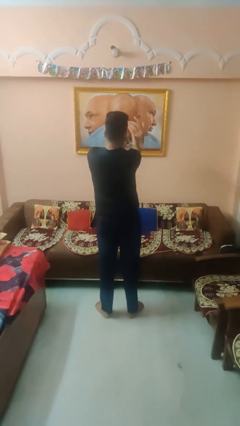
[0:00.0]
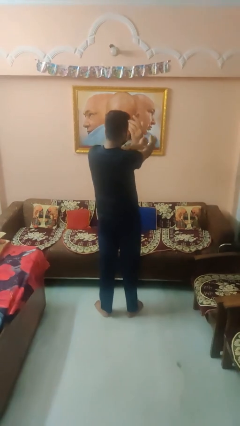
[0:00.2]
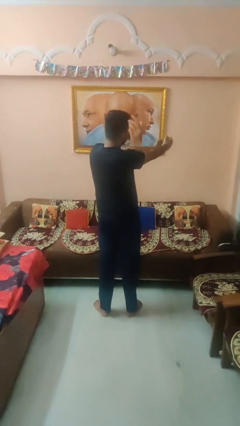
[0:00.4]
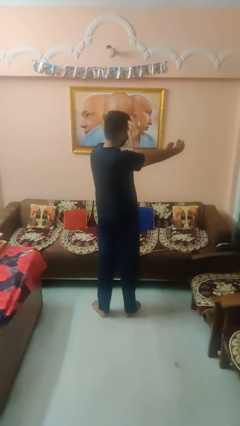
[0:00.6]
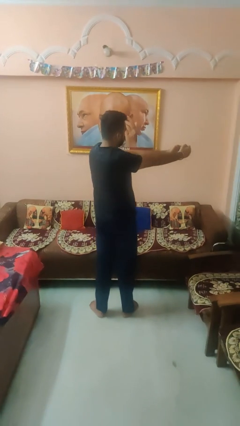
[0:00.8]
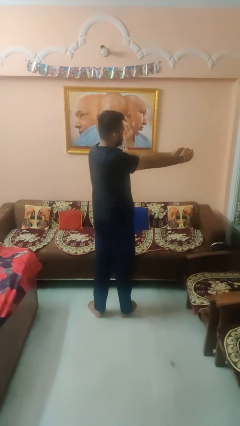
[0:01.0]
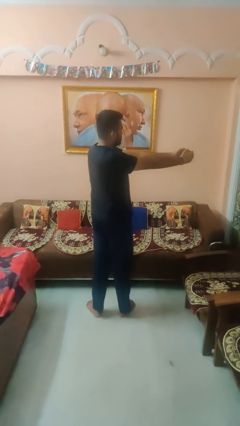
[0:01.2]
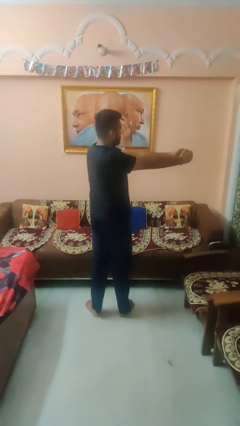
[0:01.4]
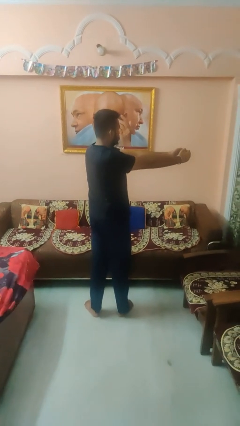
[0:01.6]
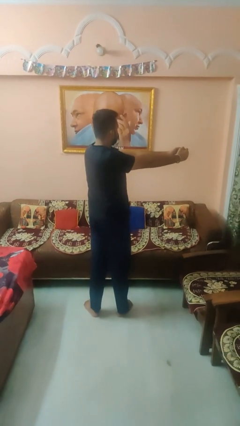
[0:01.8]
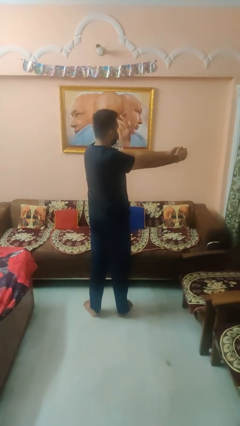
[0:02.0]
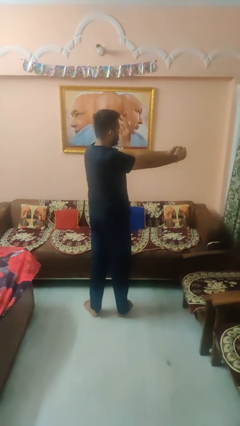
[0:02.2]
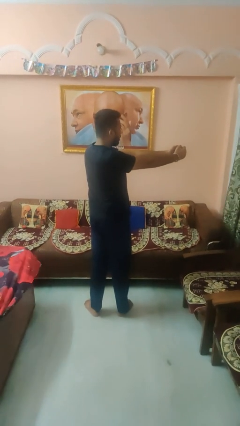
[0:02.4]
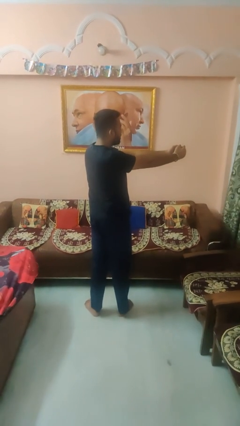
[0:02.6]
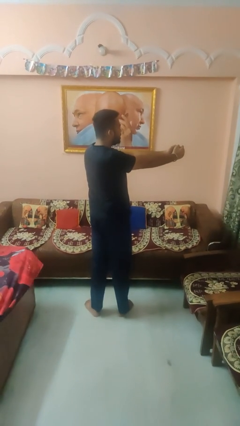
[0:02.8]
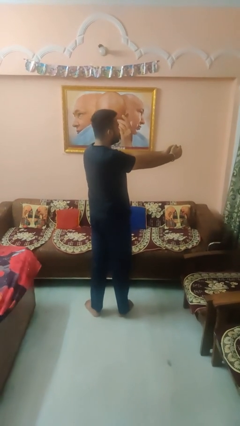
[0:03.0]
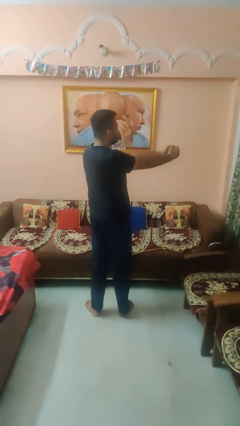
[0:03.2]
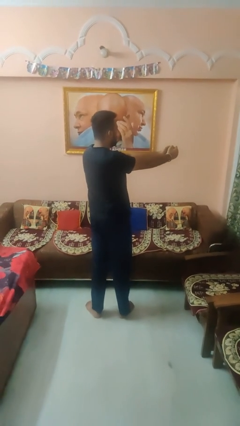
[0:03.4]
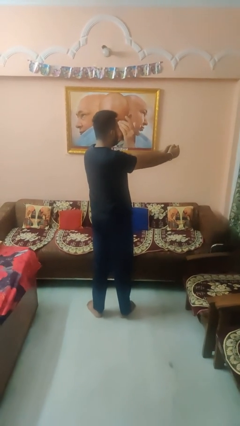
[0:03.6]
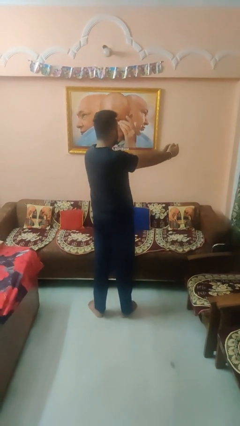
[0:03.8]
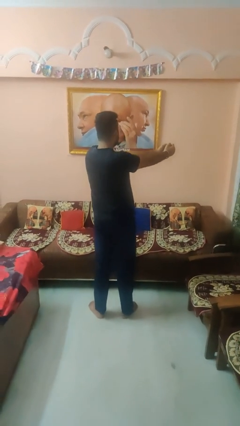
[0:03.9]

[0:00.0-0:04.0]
person gestures swipe right

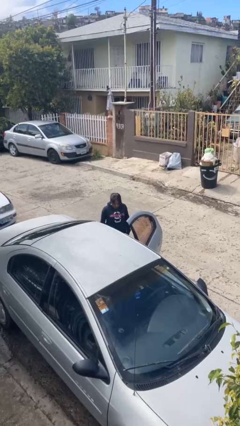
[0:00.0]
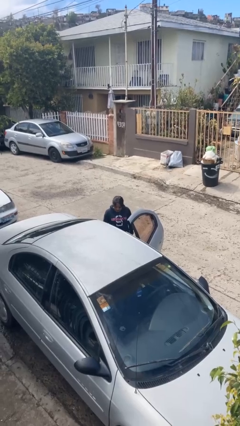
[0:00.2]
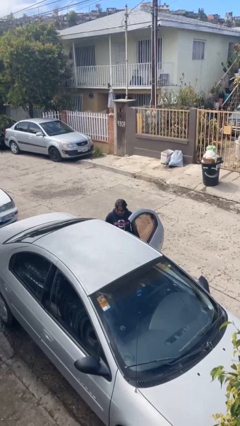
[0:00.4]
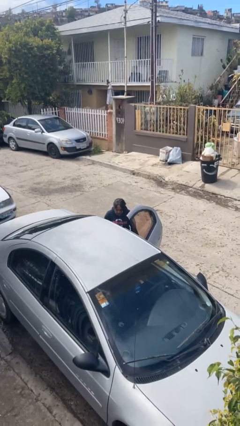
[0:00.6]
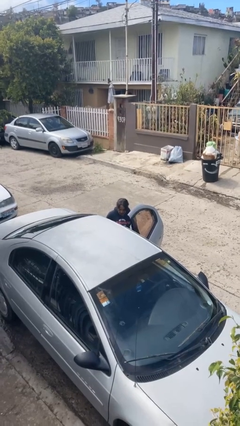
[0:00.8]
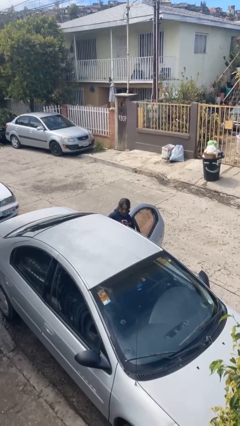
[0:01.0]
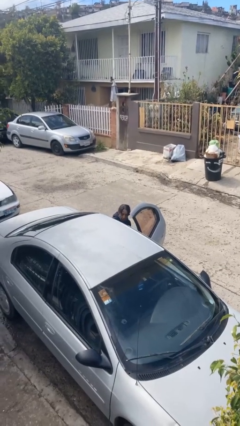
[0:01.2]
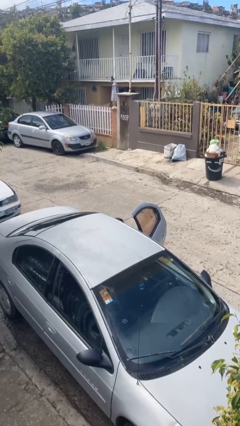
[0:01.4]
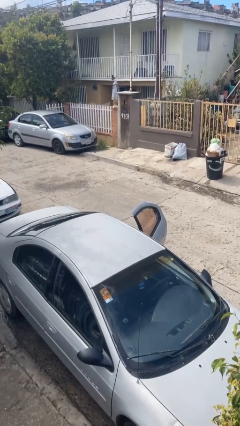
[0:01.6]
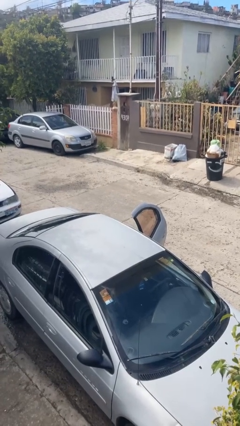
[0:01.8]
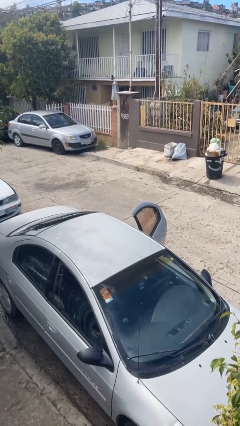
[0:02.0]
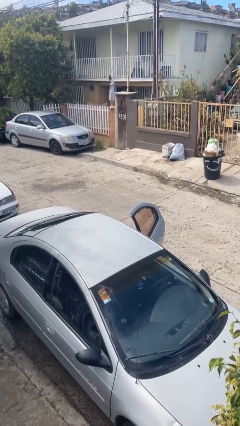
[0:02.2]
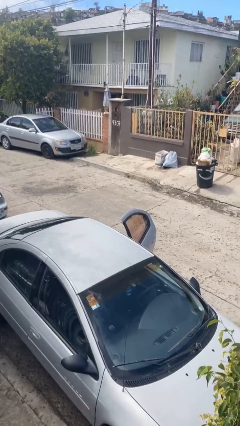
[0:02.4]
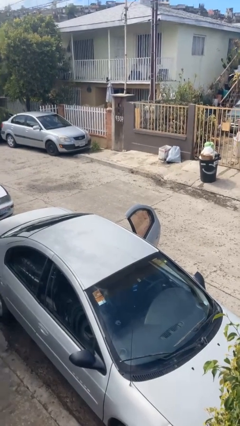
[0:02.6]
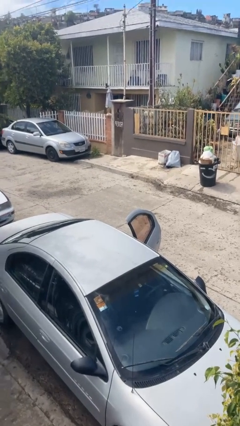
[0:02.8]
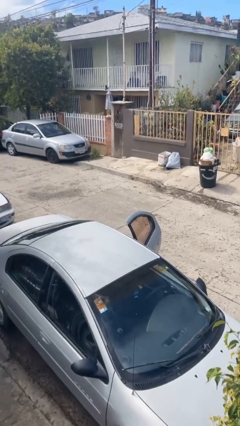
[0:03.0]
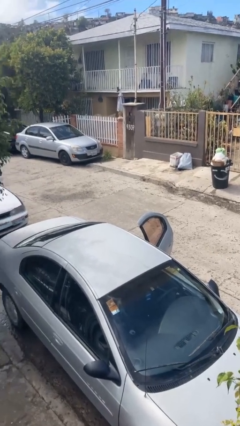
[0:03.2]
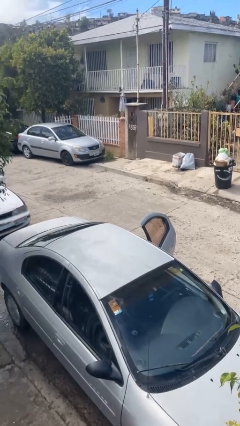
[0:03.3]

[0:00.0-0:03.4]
person enters car

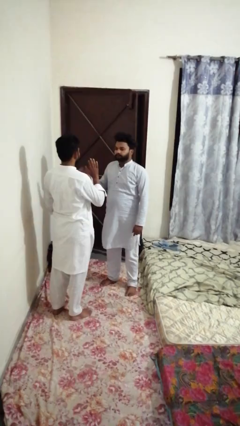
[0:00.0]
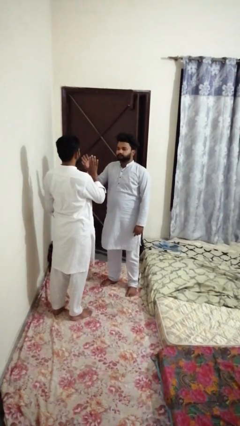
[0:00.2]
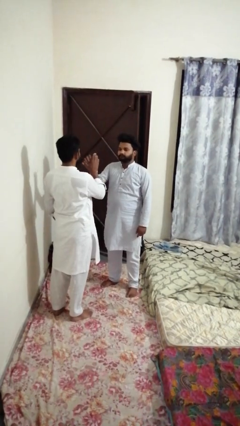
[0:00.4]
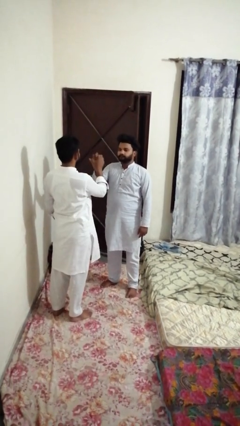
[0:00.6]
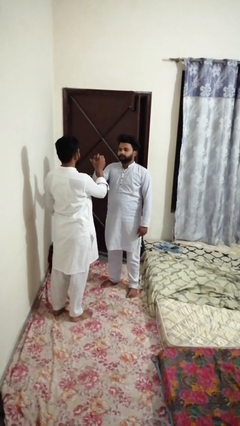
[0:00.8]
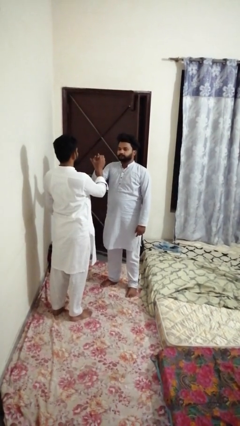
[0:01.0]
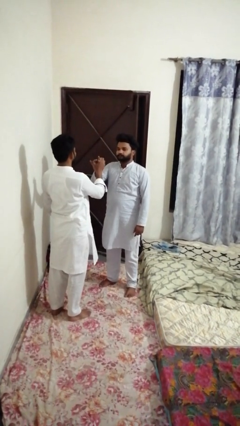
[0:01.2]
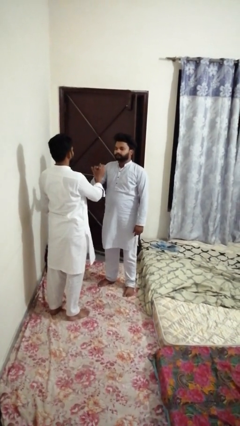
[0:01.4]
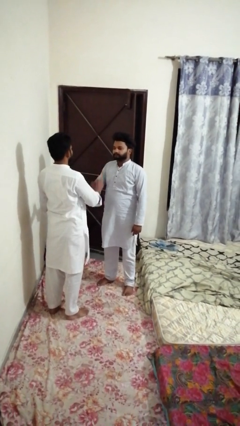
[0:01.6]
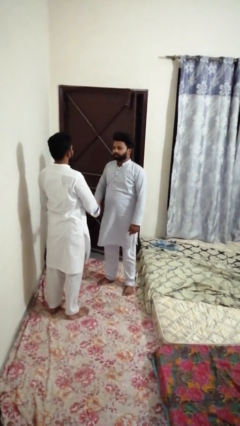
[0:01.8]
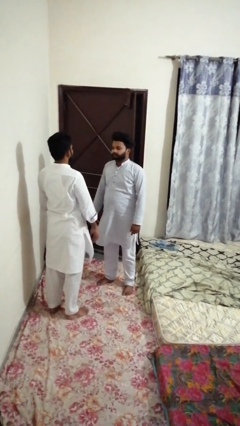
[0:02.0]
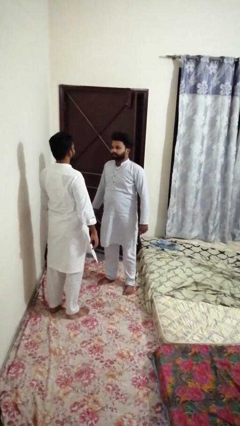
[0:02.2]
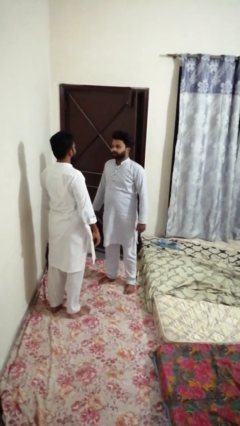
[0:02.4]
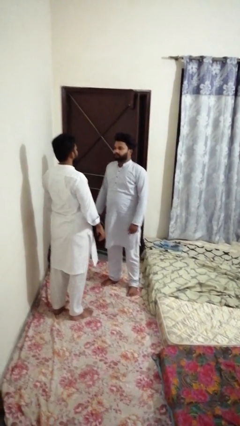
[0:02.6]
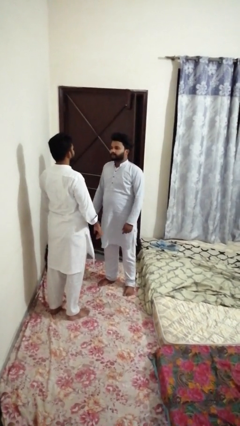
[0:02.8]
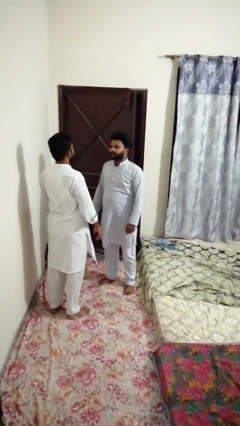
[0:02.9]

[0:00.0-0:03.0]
person highfives hand

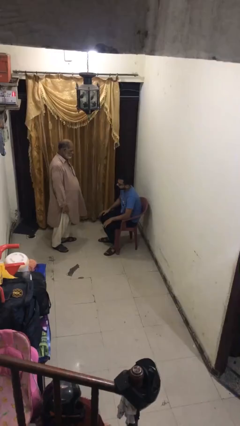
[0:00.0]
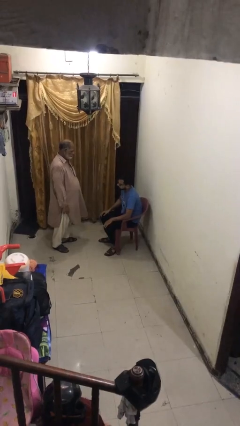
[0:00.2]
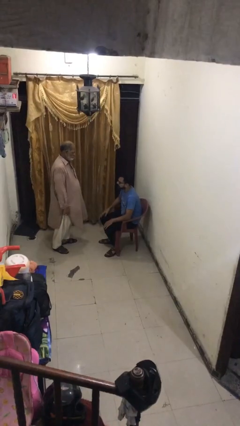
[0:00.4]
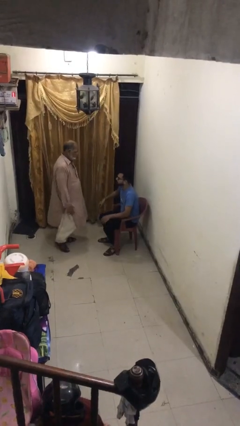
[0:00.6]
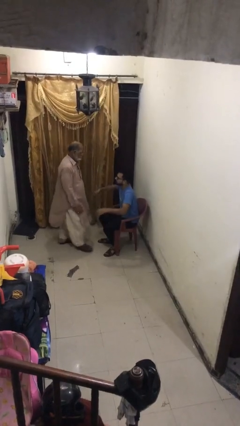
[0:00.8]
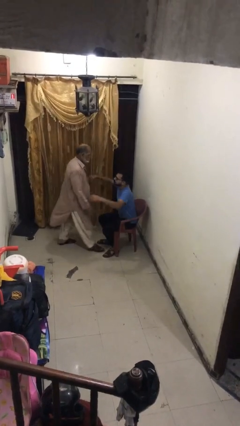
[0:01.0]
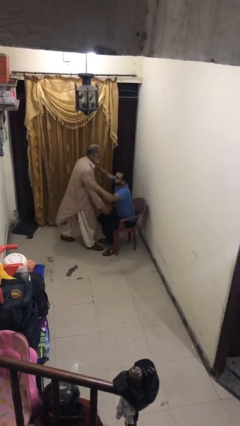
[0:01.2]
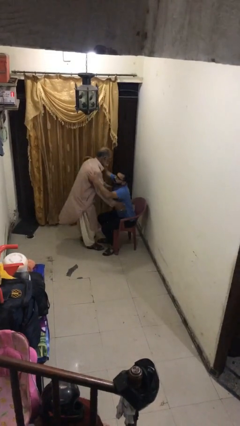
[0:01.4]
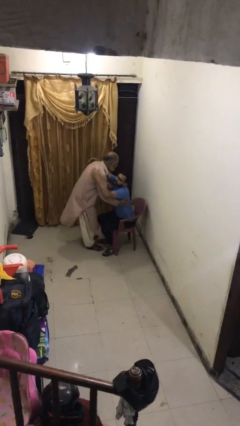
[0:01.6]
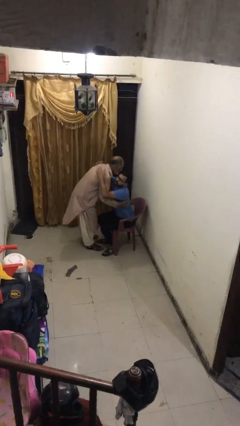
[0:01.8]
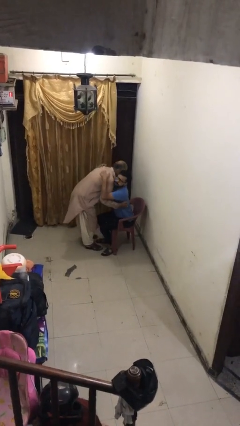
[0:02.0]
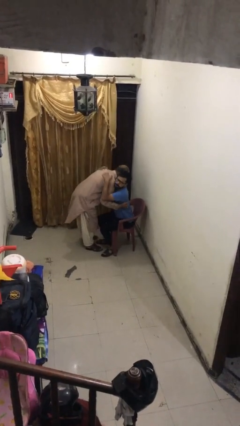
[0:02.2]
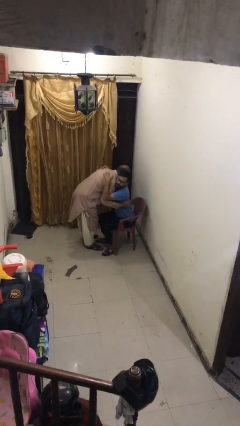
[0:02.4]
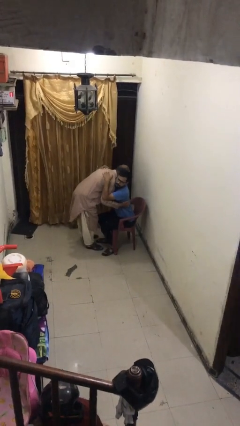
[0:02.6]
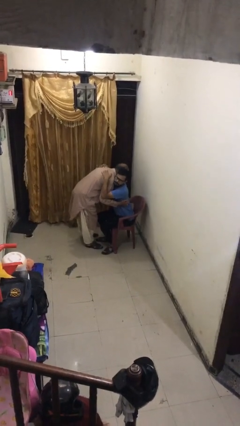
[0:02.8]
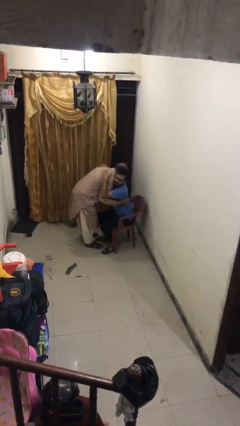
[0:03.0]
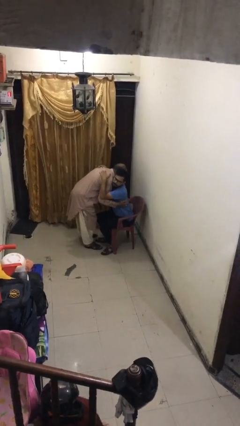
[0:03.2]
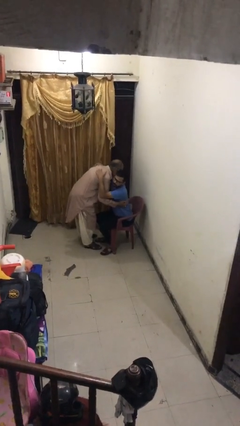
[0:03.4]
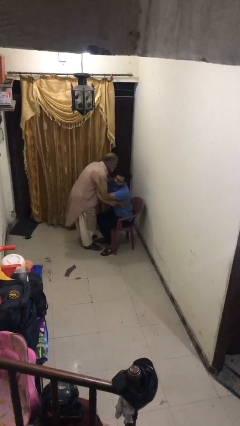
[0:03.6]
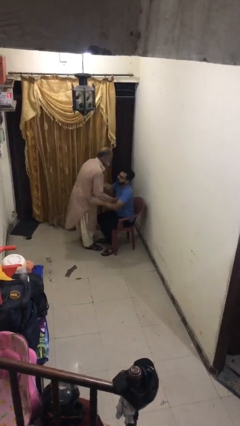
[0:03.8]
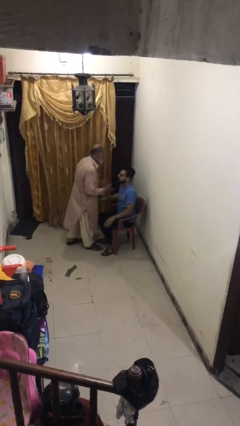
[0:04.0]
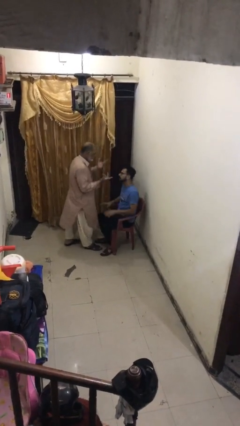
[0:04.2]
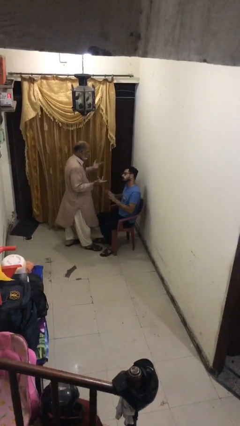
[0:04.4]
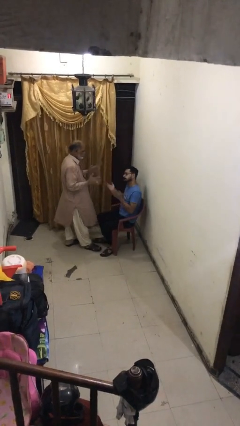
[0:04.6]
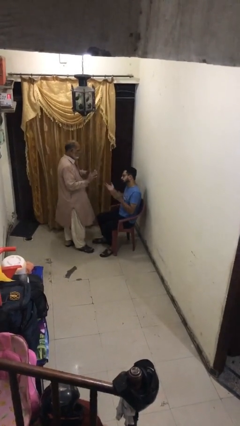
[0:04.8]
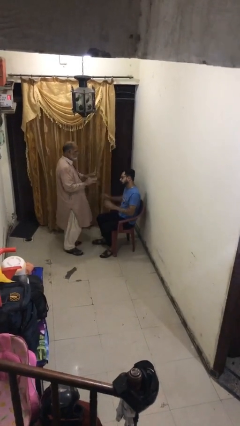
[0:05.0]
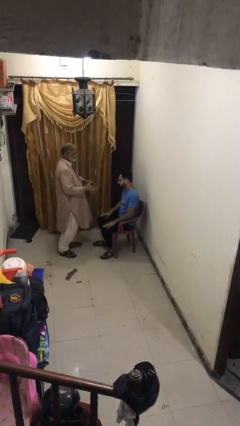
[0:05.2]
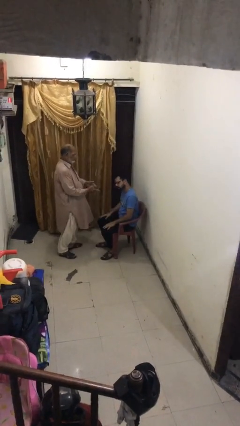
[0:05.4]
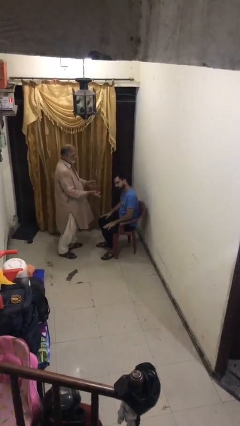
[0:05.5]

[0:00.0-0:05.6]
person embraces person

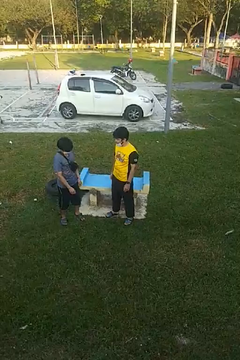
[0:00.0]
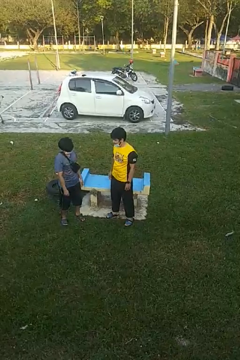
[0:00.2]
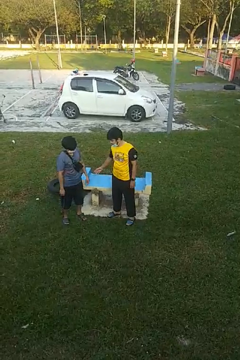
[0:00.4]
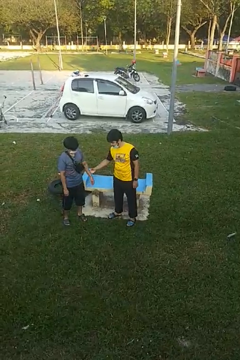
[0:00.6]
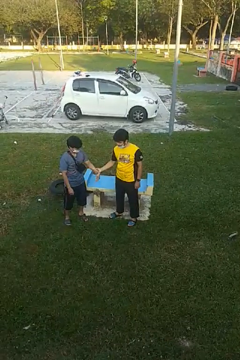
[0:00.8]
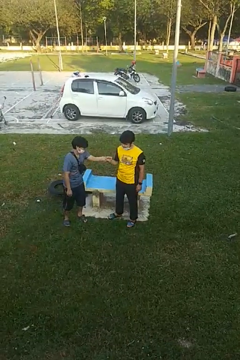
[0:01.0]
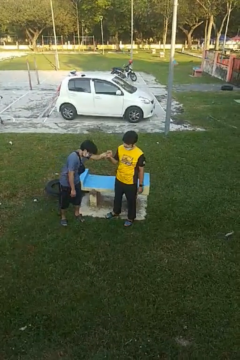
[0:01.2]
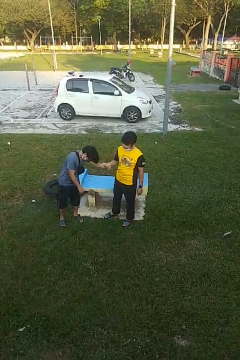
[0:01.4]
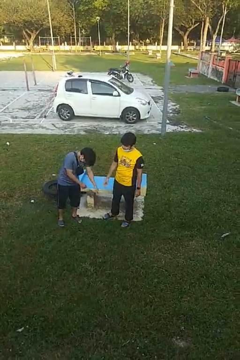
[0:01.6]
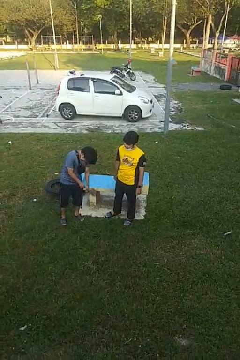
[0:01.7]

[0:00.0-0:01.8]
person grabs person by forearm

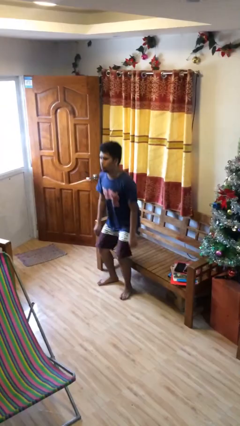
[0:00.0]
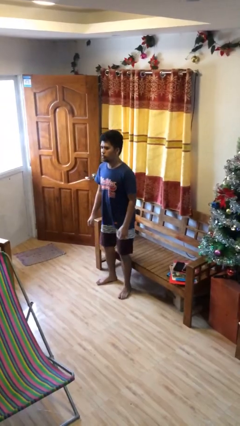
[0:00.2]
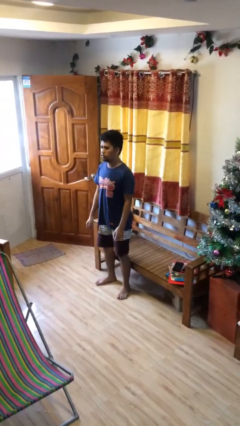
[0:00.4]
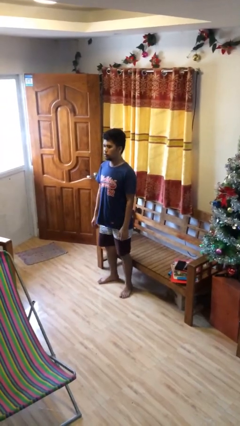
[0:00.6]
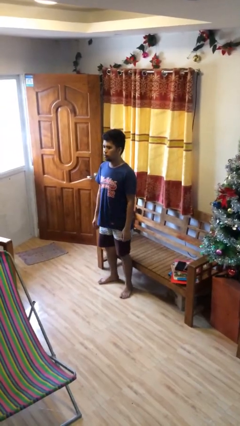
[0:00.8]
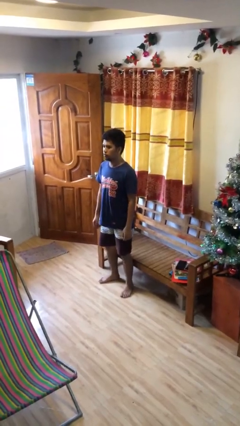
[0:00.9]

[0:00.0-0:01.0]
person stands up
